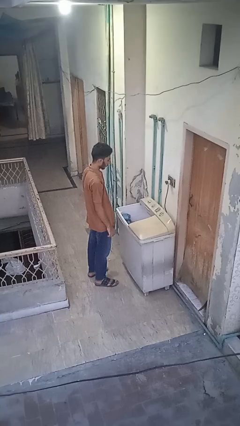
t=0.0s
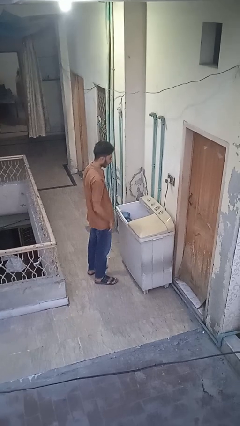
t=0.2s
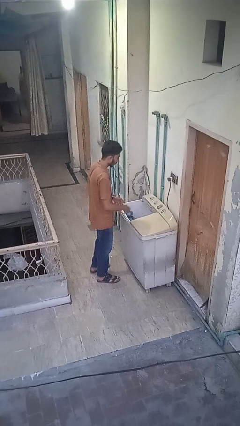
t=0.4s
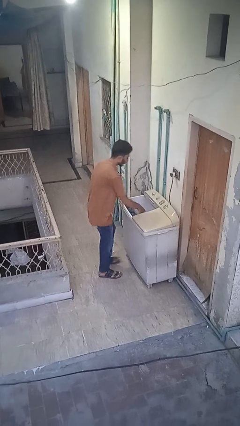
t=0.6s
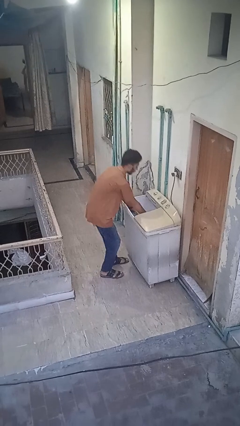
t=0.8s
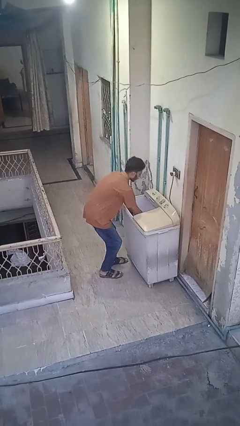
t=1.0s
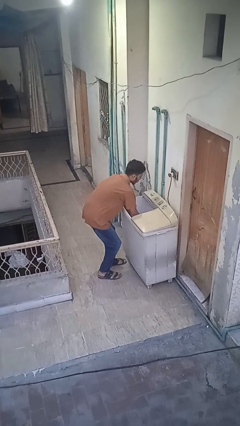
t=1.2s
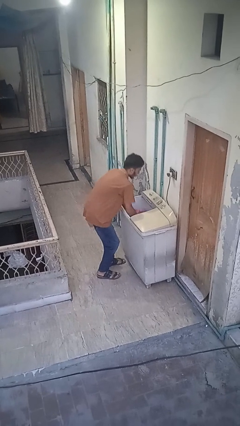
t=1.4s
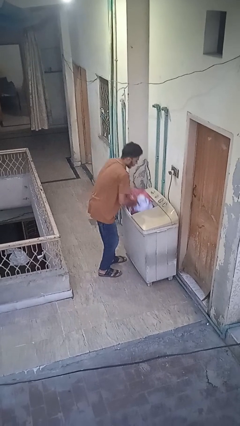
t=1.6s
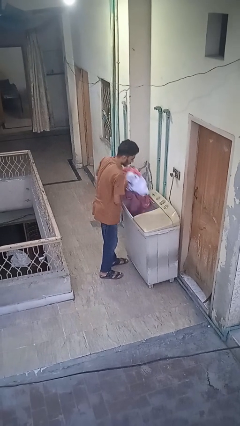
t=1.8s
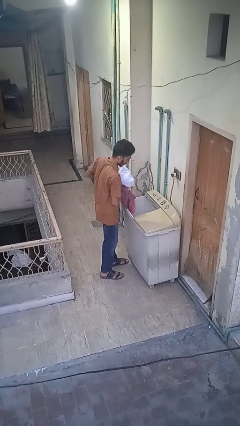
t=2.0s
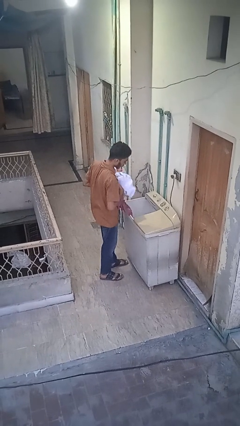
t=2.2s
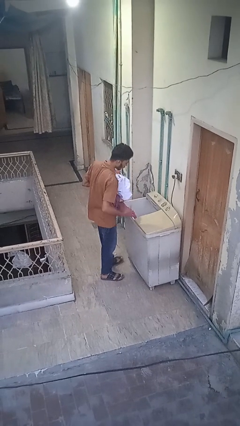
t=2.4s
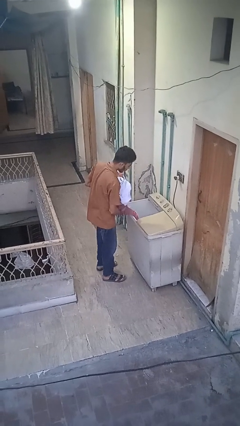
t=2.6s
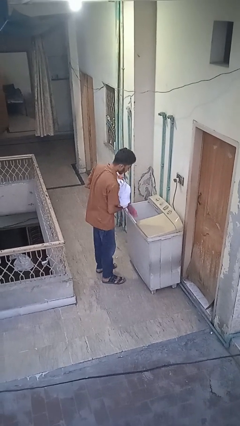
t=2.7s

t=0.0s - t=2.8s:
person unloads clotheswasher

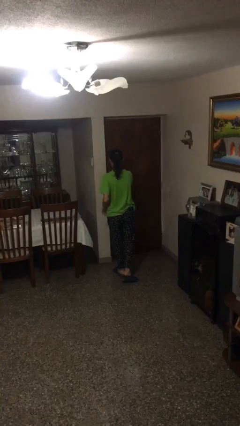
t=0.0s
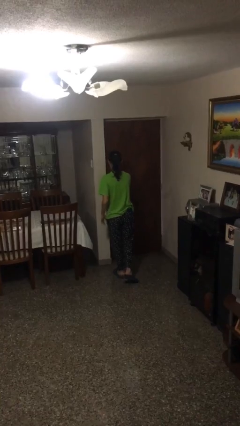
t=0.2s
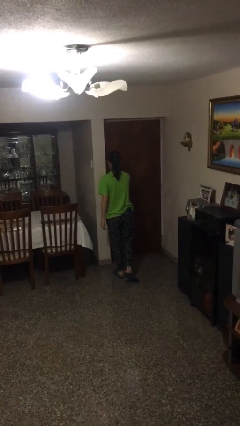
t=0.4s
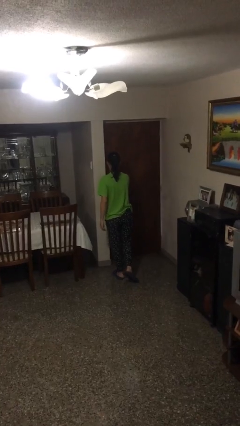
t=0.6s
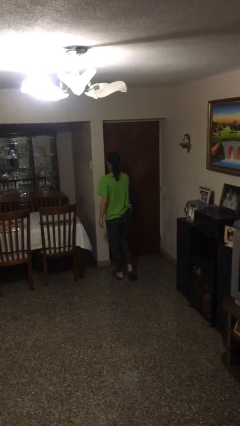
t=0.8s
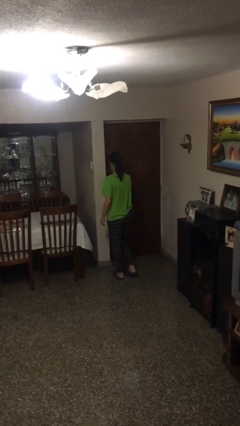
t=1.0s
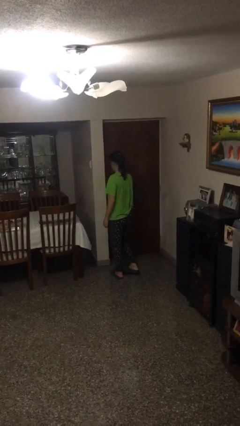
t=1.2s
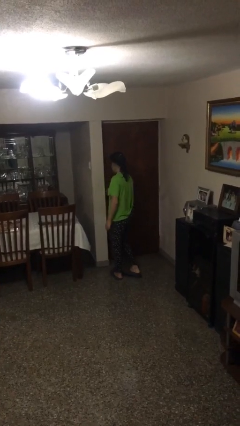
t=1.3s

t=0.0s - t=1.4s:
person closes facility door

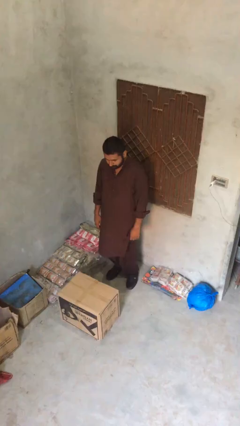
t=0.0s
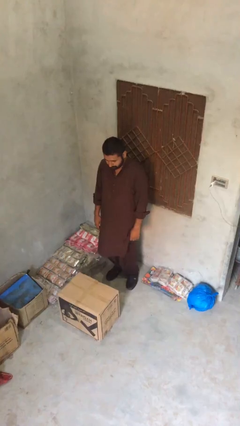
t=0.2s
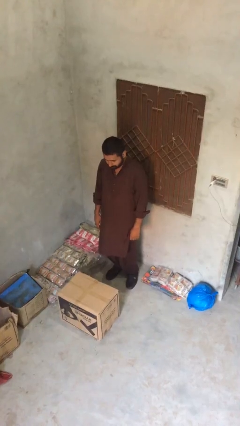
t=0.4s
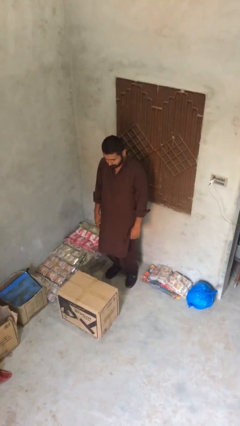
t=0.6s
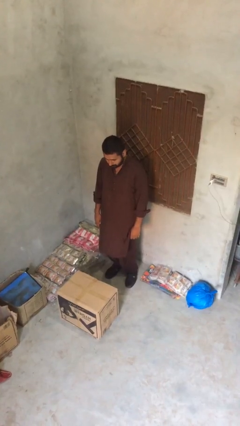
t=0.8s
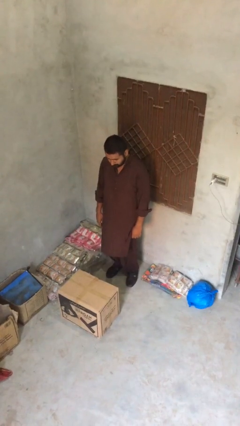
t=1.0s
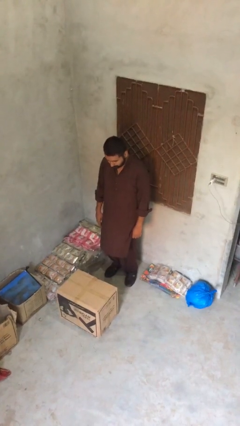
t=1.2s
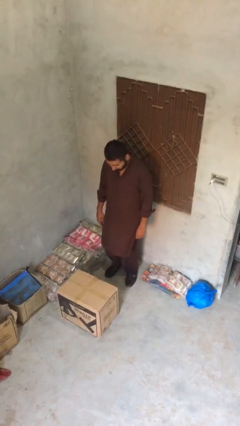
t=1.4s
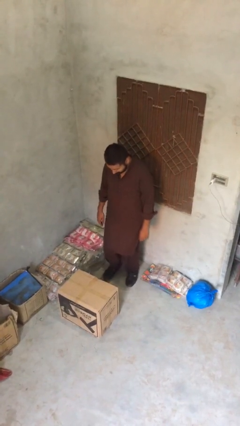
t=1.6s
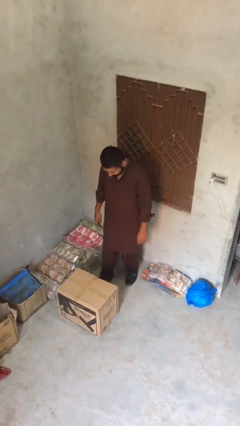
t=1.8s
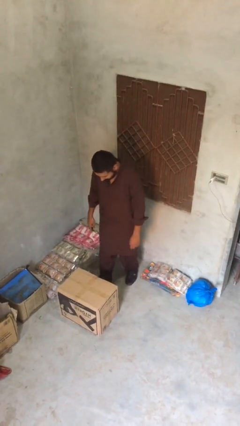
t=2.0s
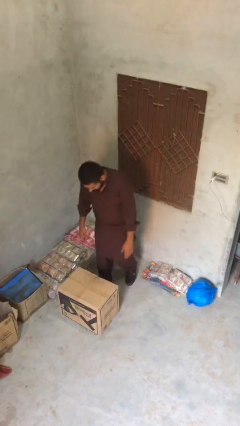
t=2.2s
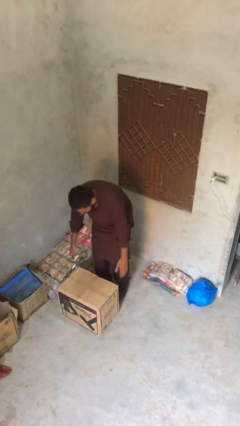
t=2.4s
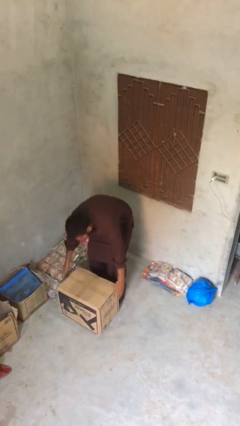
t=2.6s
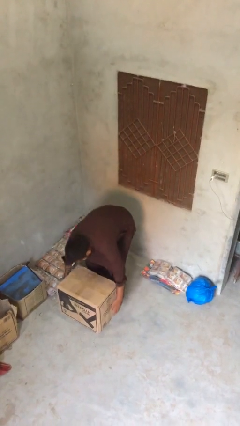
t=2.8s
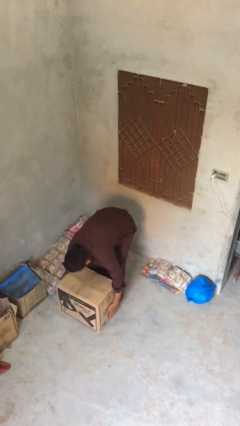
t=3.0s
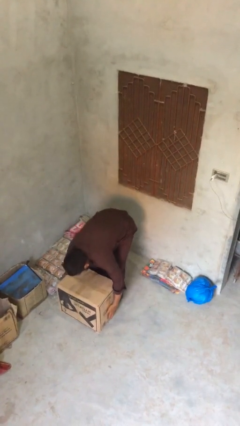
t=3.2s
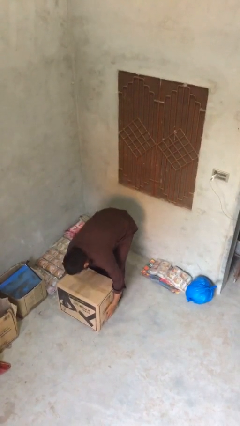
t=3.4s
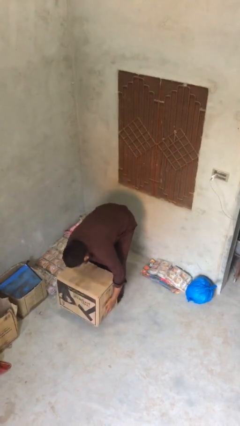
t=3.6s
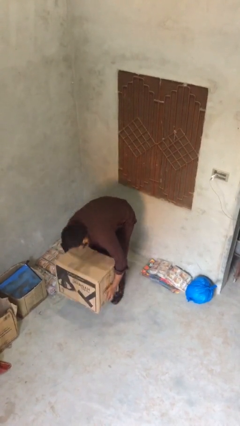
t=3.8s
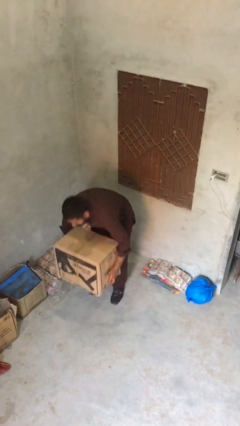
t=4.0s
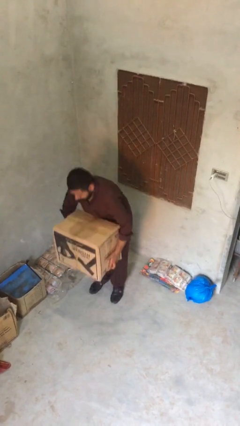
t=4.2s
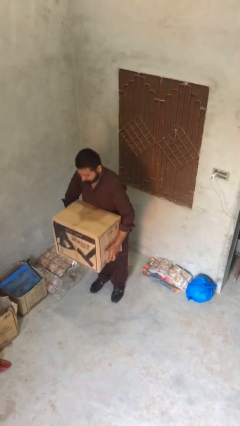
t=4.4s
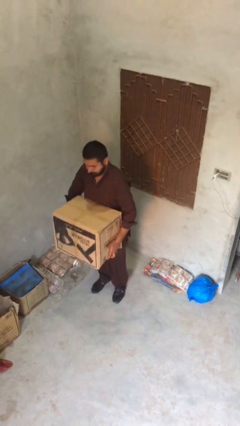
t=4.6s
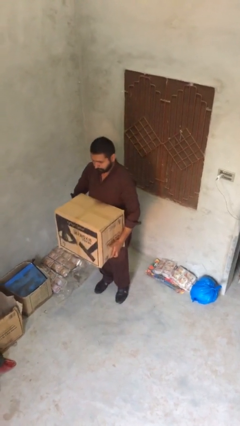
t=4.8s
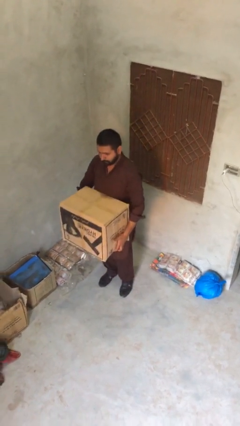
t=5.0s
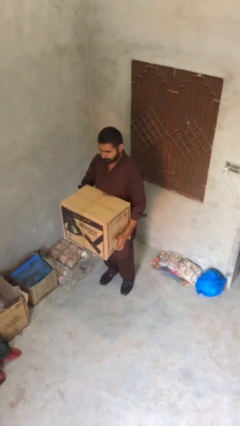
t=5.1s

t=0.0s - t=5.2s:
person picks up object from floor

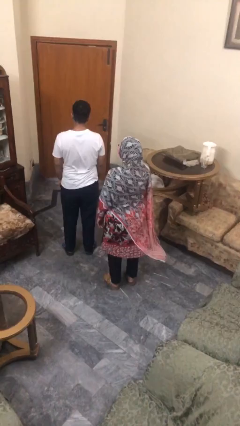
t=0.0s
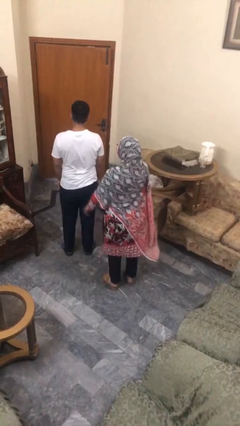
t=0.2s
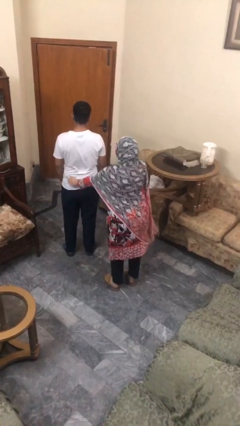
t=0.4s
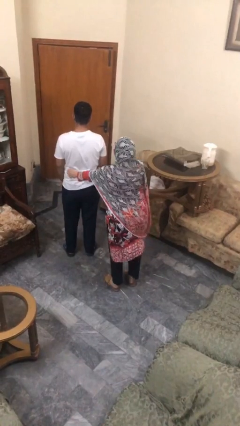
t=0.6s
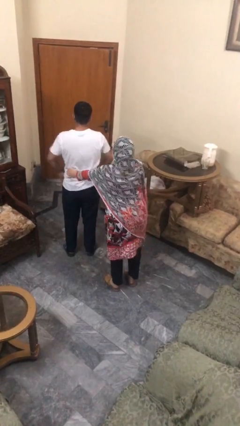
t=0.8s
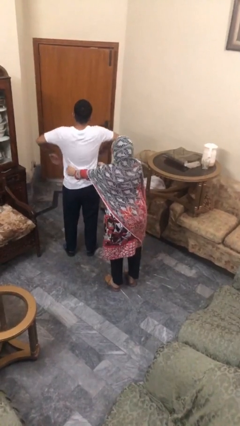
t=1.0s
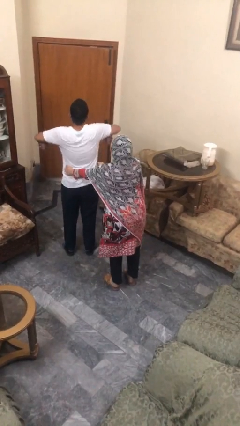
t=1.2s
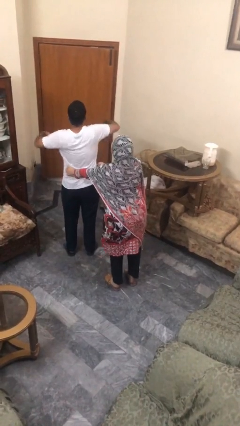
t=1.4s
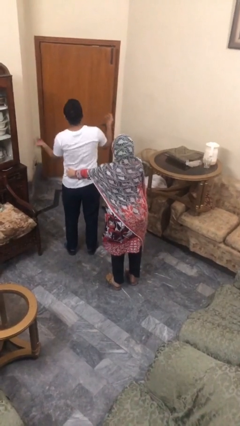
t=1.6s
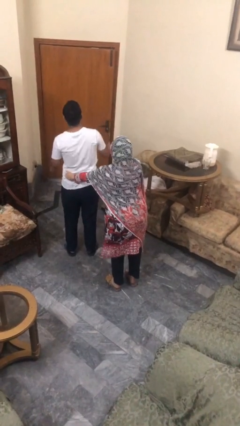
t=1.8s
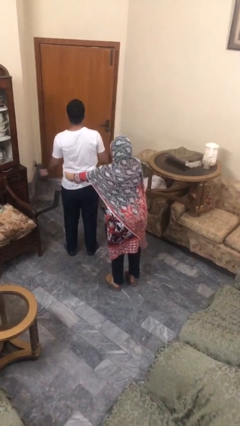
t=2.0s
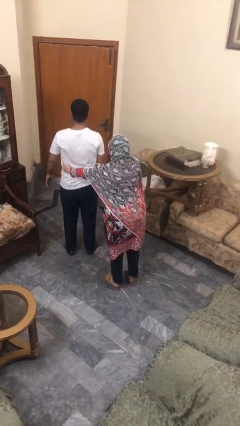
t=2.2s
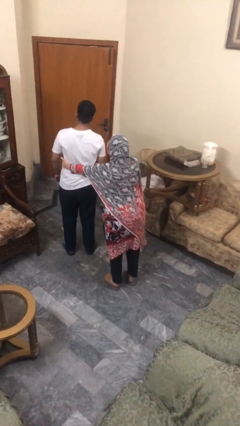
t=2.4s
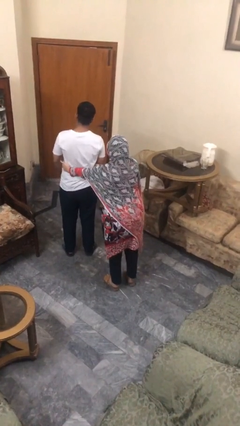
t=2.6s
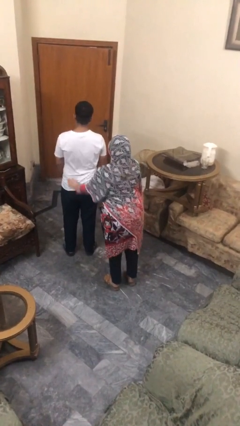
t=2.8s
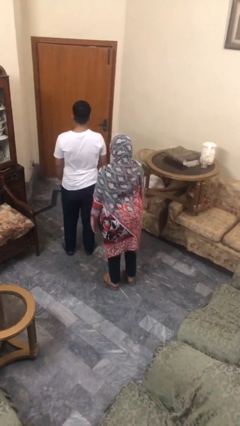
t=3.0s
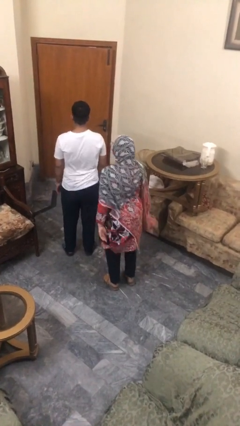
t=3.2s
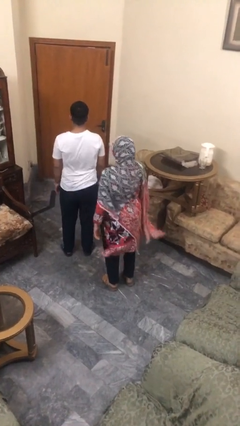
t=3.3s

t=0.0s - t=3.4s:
person tickles person

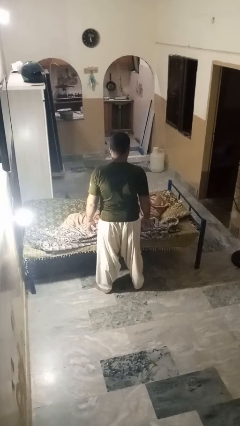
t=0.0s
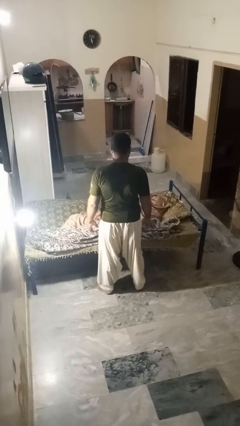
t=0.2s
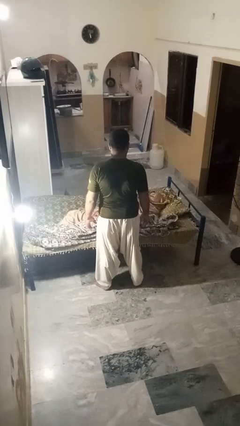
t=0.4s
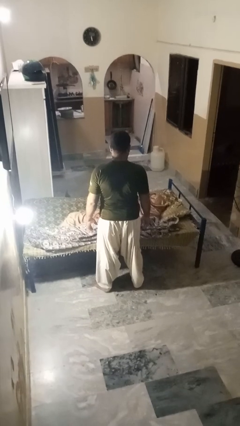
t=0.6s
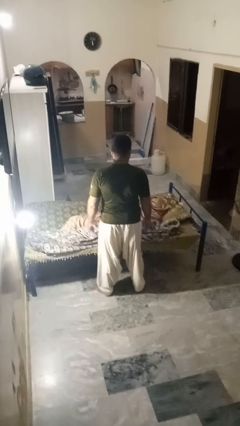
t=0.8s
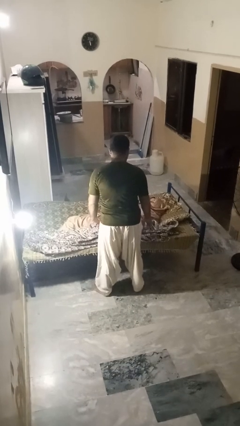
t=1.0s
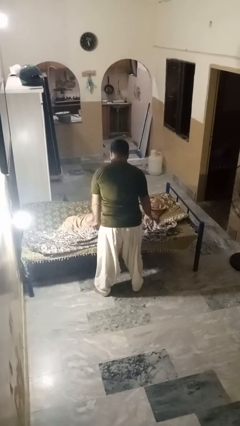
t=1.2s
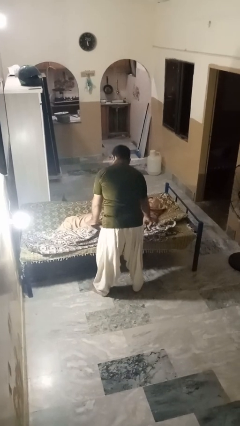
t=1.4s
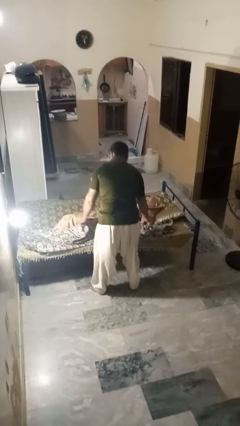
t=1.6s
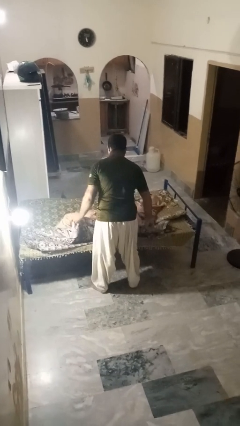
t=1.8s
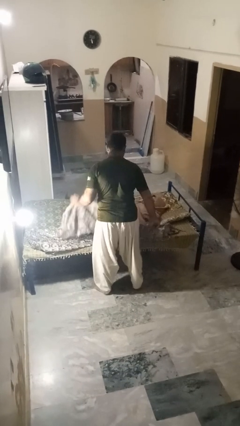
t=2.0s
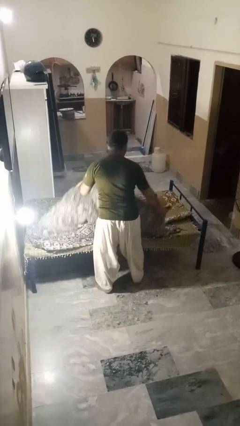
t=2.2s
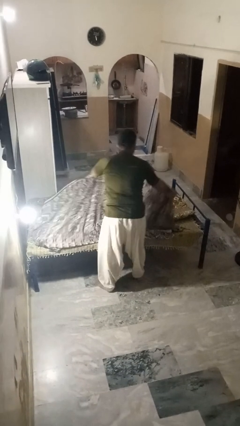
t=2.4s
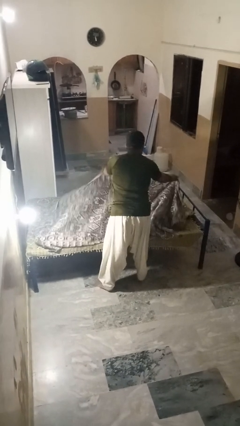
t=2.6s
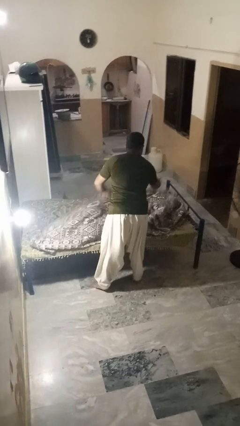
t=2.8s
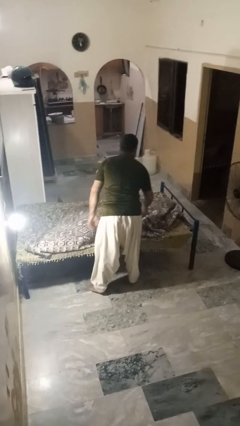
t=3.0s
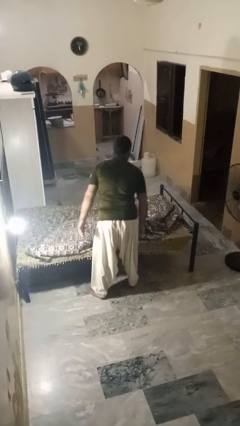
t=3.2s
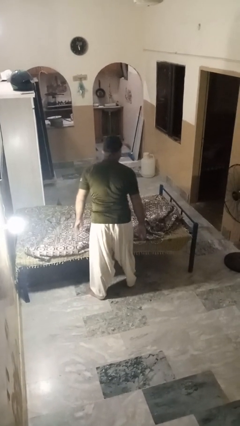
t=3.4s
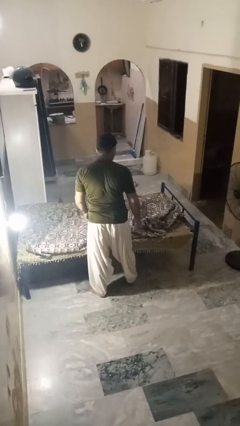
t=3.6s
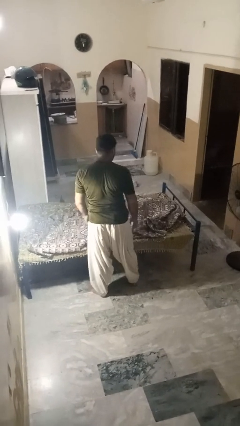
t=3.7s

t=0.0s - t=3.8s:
person covers friend with blanket

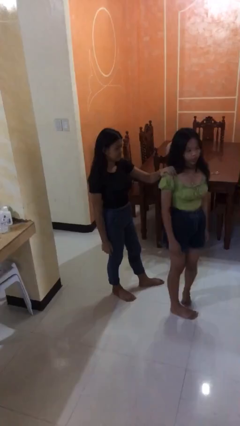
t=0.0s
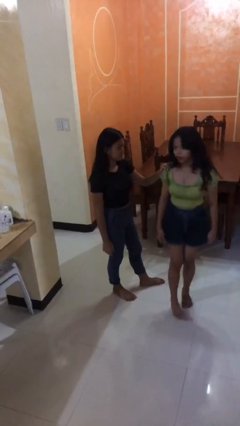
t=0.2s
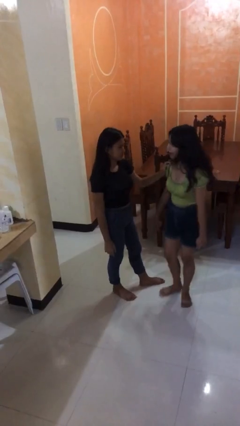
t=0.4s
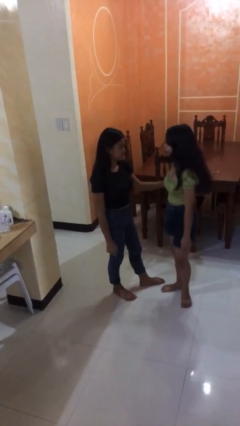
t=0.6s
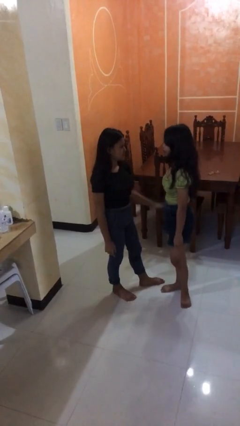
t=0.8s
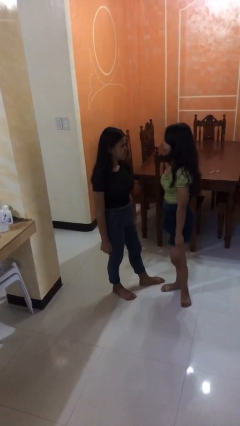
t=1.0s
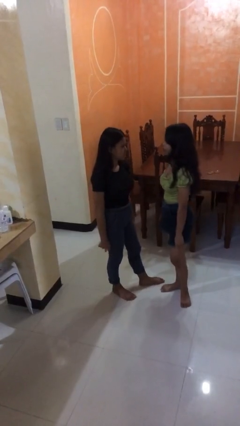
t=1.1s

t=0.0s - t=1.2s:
person spins person around
